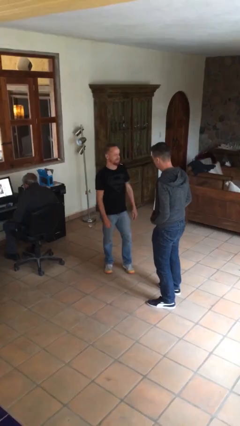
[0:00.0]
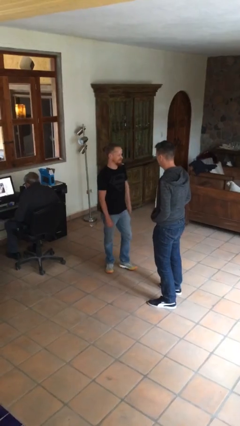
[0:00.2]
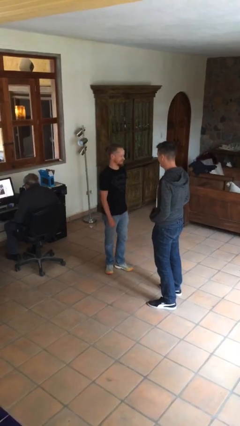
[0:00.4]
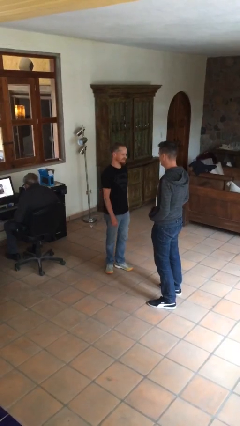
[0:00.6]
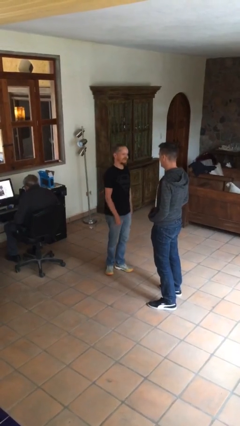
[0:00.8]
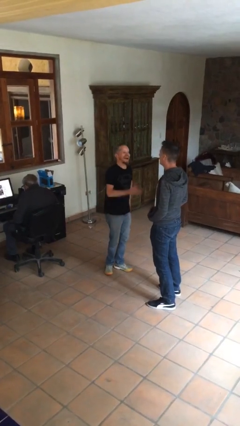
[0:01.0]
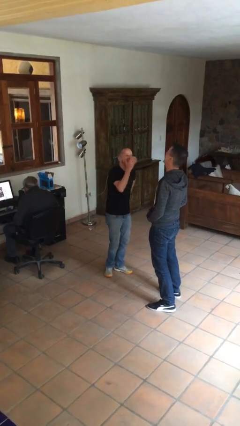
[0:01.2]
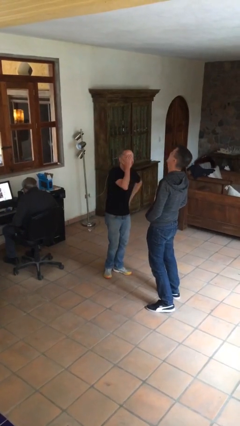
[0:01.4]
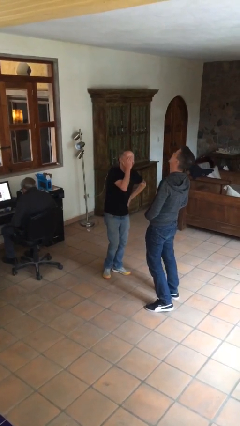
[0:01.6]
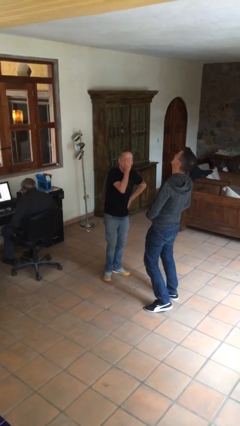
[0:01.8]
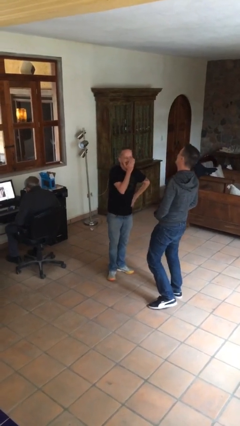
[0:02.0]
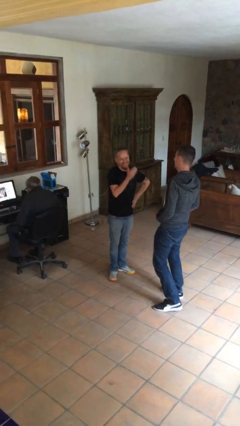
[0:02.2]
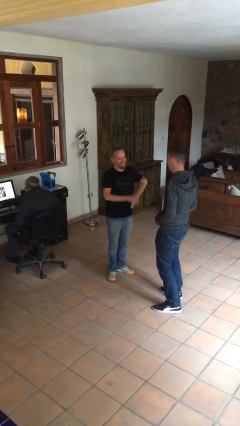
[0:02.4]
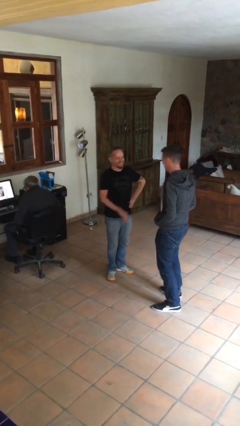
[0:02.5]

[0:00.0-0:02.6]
person laughs with person

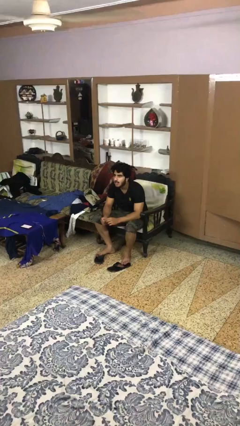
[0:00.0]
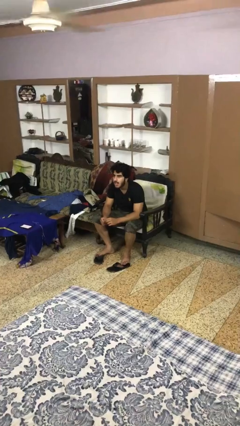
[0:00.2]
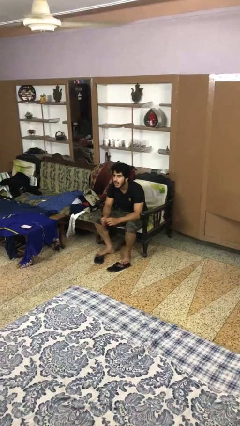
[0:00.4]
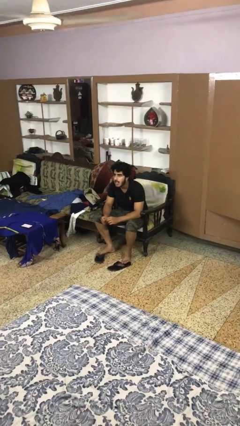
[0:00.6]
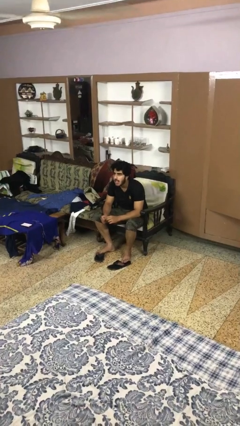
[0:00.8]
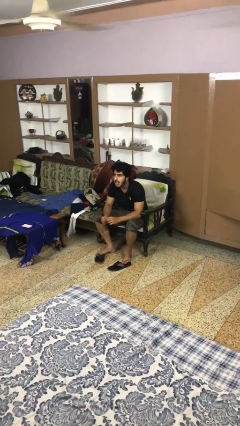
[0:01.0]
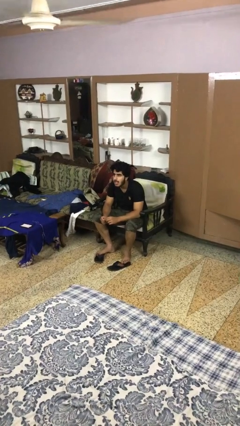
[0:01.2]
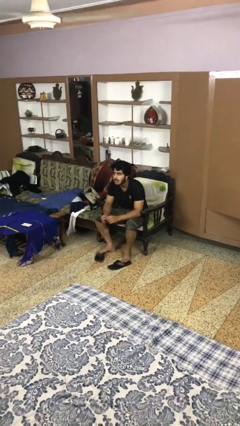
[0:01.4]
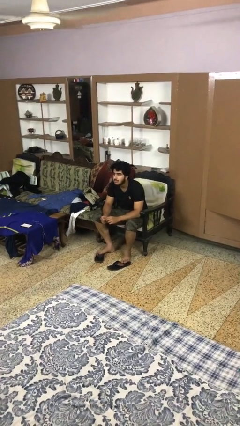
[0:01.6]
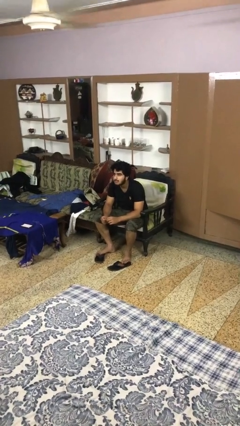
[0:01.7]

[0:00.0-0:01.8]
person sticks out tongue

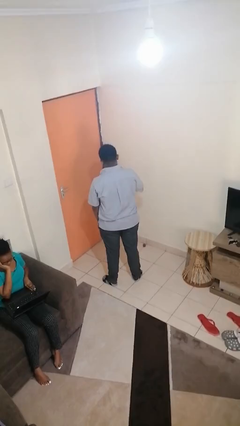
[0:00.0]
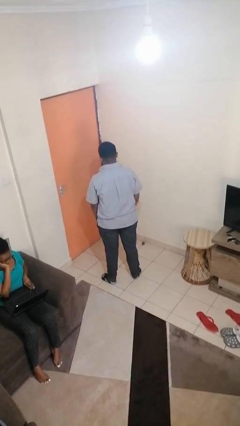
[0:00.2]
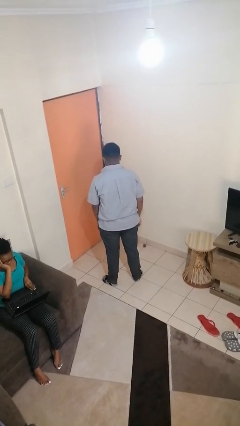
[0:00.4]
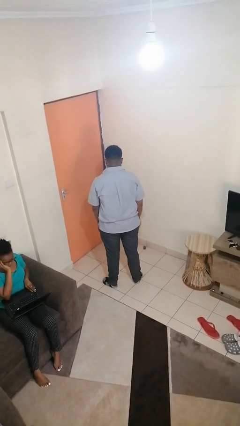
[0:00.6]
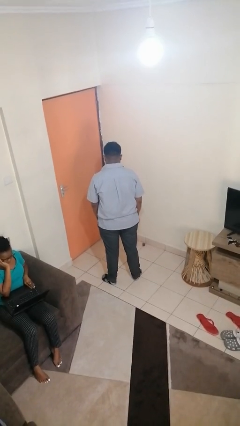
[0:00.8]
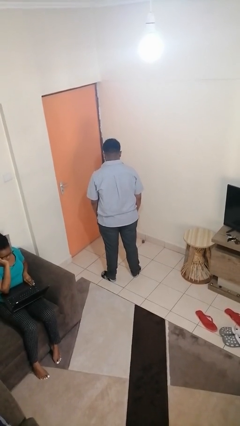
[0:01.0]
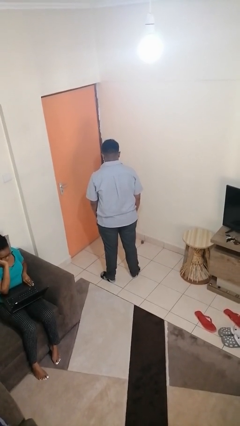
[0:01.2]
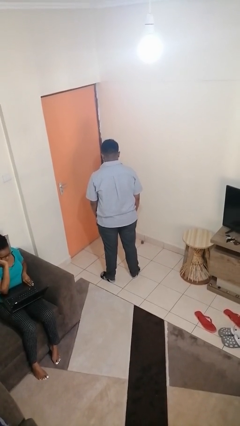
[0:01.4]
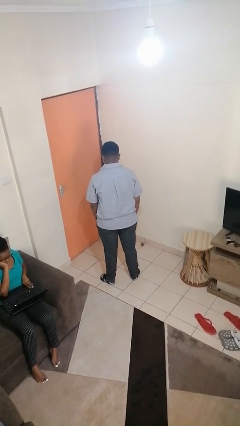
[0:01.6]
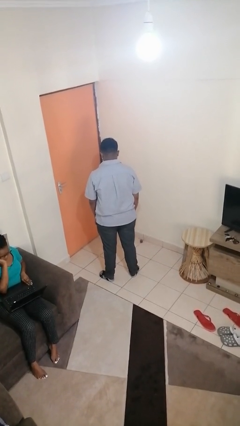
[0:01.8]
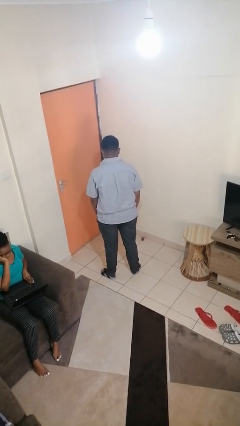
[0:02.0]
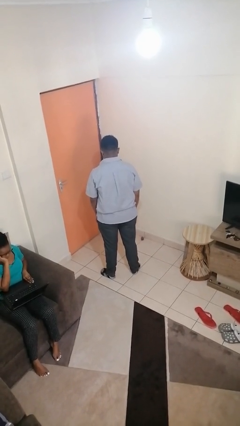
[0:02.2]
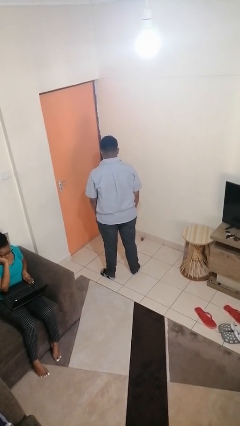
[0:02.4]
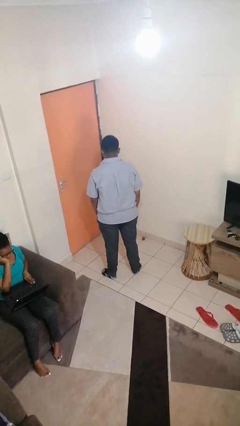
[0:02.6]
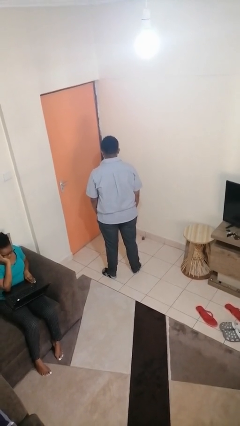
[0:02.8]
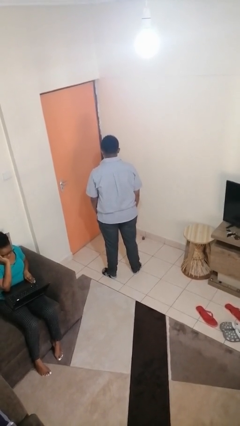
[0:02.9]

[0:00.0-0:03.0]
person exercises with jumping jacks

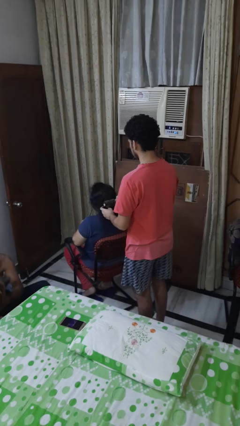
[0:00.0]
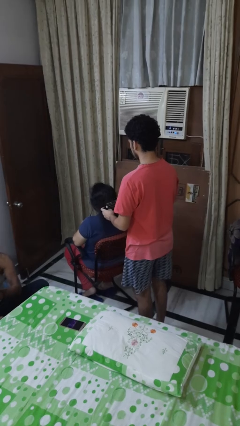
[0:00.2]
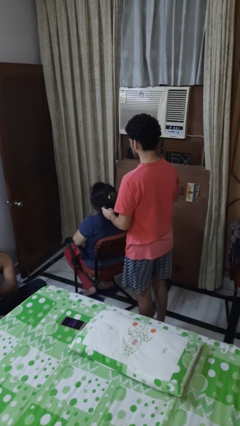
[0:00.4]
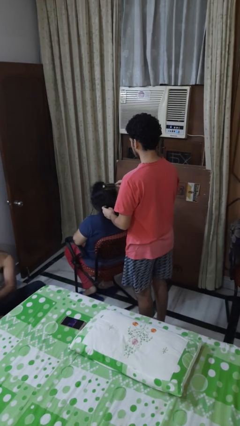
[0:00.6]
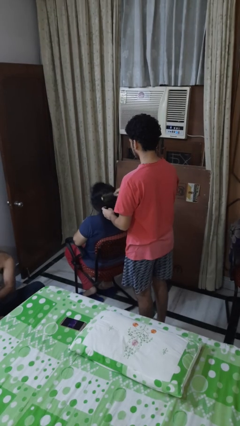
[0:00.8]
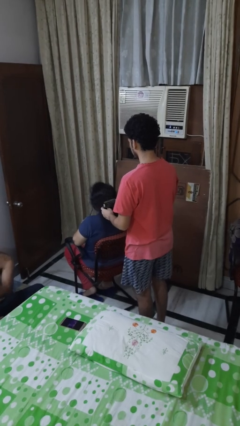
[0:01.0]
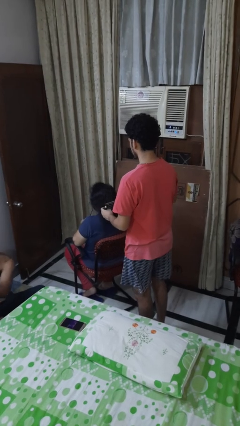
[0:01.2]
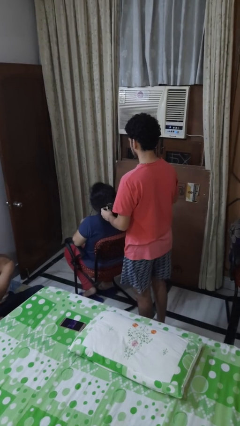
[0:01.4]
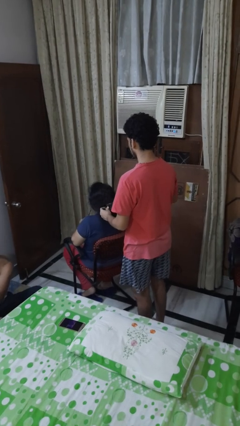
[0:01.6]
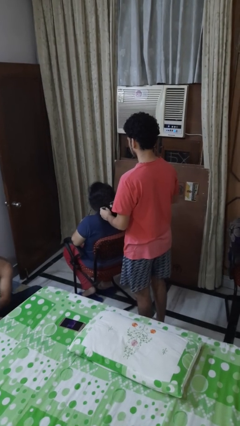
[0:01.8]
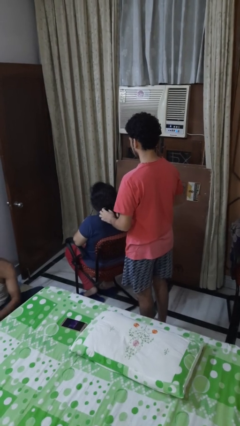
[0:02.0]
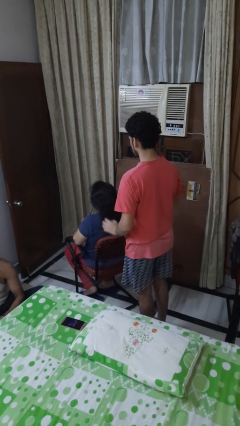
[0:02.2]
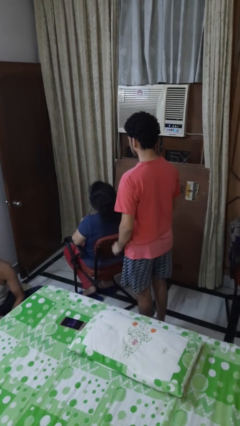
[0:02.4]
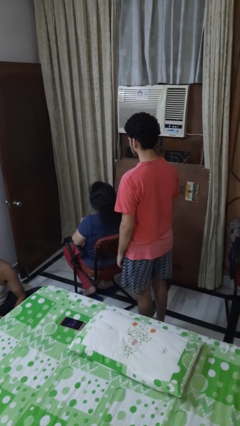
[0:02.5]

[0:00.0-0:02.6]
person brushes hair of person

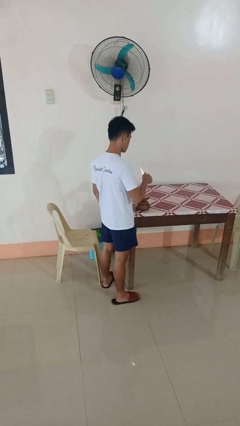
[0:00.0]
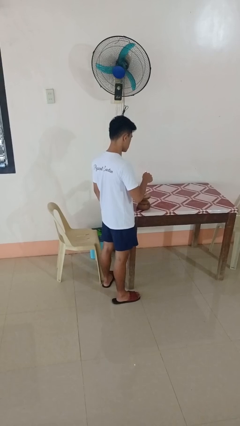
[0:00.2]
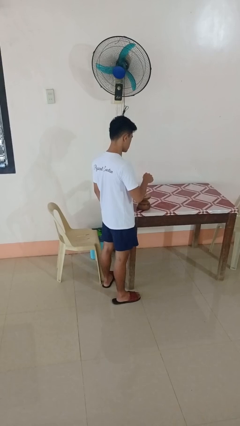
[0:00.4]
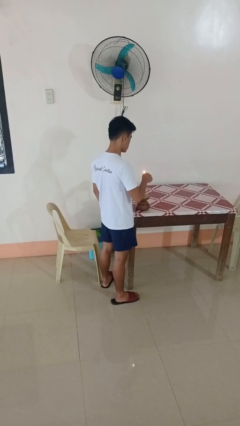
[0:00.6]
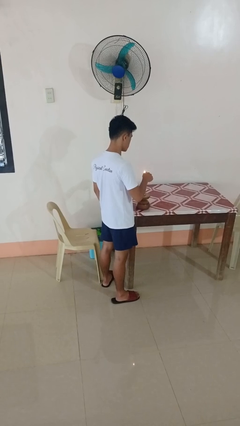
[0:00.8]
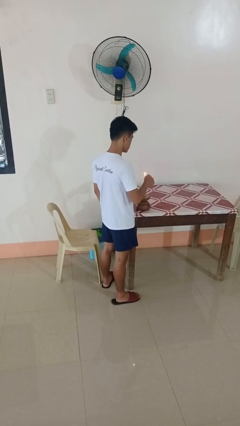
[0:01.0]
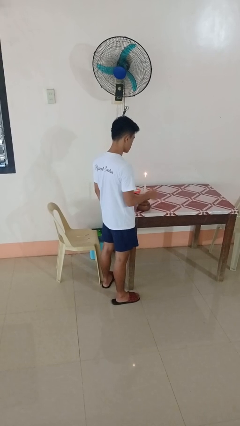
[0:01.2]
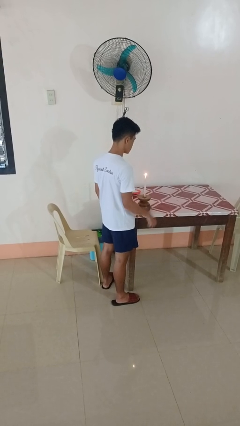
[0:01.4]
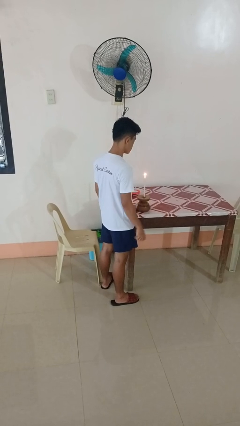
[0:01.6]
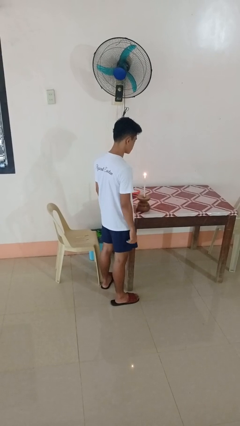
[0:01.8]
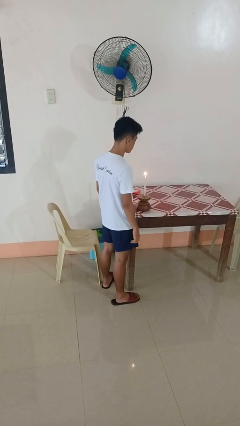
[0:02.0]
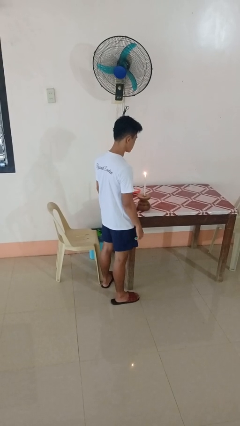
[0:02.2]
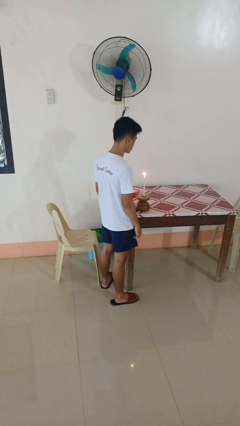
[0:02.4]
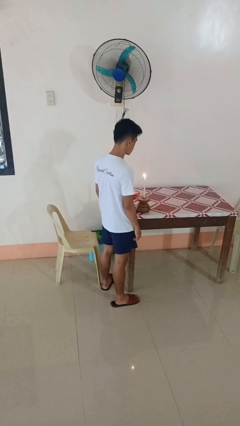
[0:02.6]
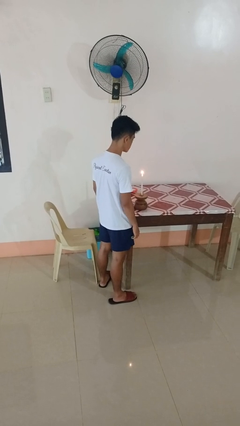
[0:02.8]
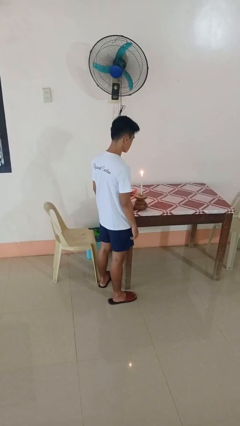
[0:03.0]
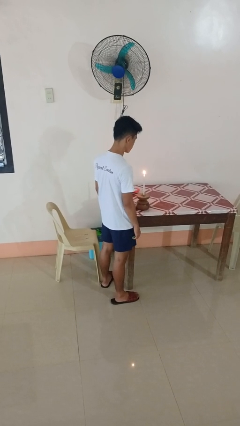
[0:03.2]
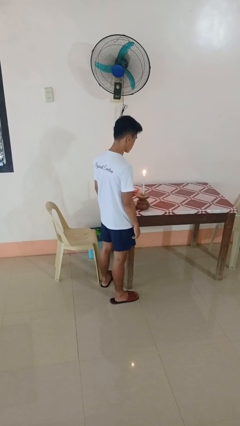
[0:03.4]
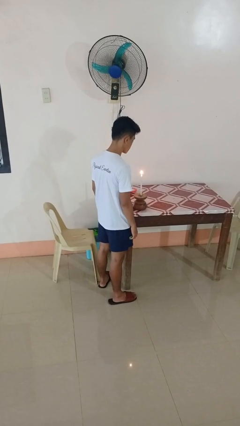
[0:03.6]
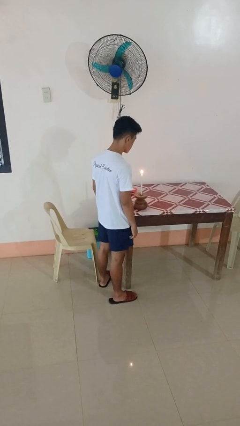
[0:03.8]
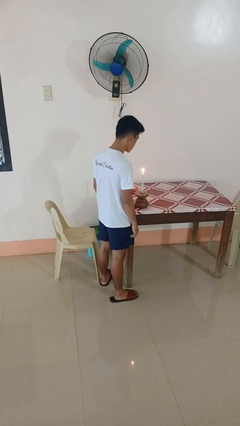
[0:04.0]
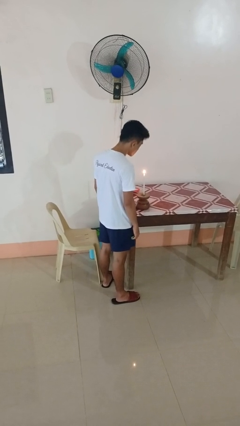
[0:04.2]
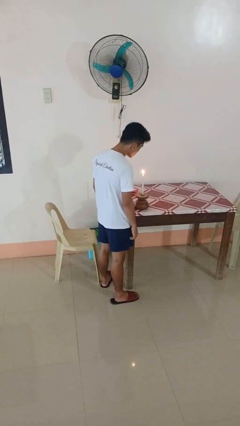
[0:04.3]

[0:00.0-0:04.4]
person lights candle

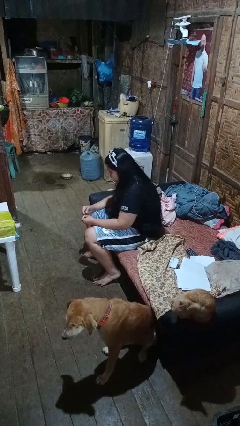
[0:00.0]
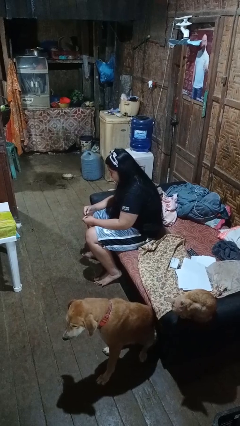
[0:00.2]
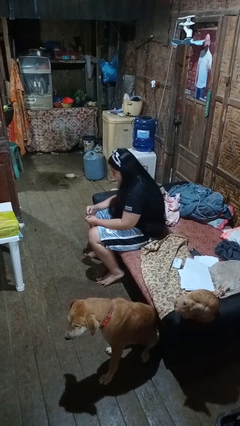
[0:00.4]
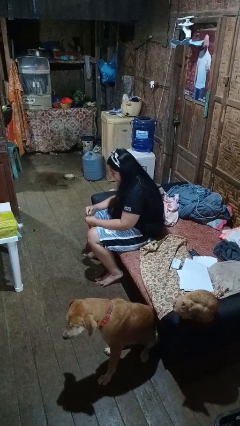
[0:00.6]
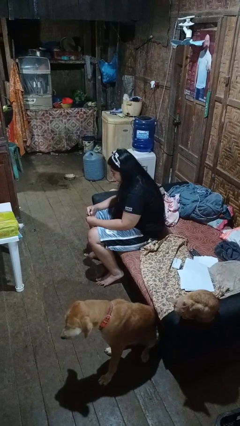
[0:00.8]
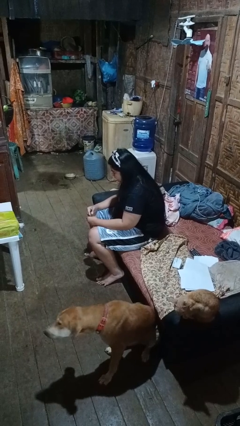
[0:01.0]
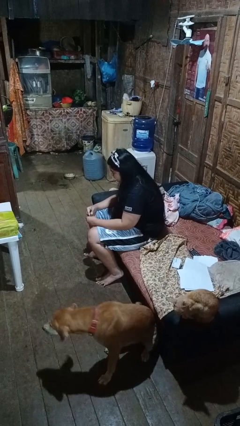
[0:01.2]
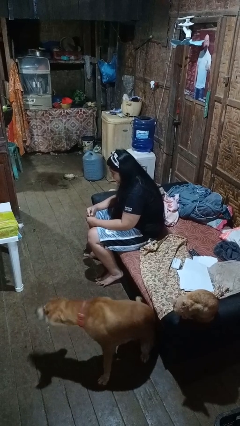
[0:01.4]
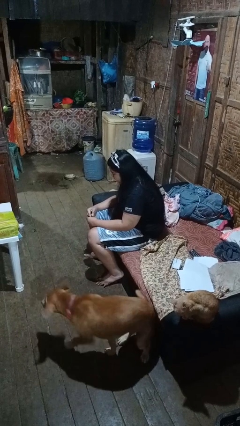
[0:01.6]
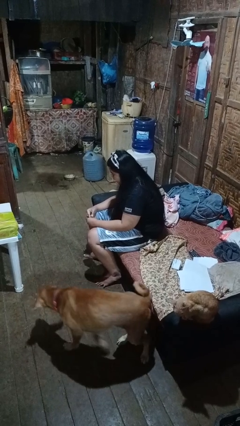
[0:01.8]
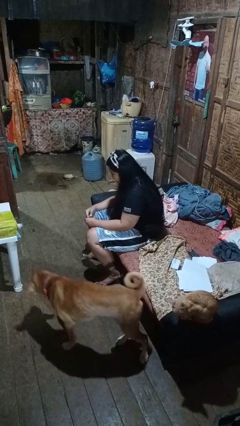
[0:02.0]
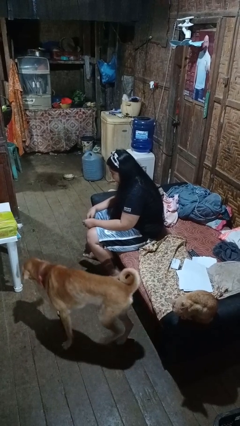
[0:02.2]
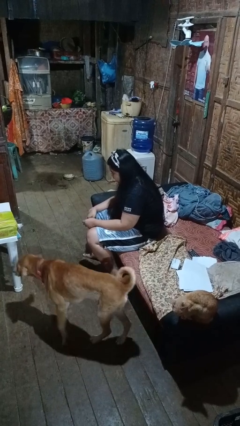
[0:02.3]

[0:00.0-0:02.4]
person clips fingernails

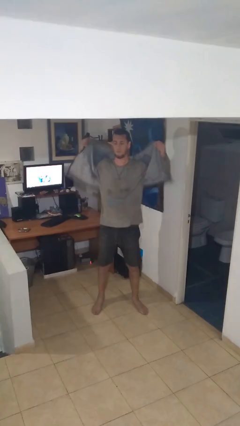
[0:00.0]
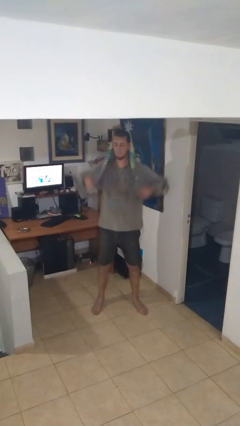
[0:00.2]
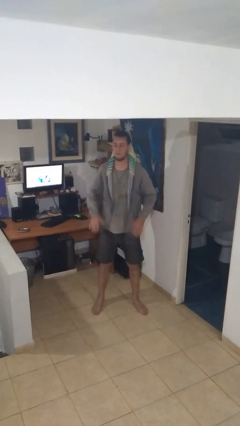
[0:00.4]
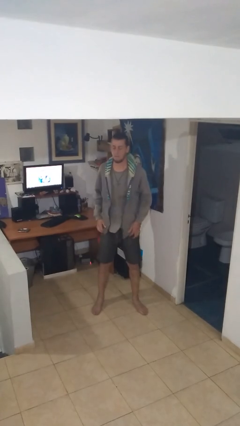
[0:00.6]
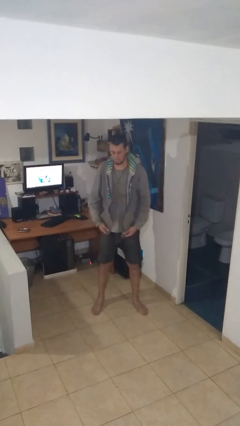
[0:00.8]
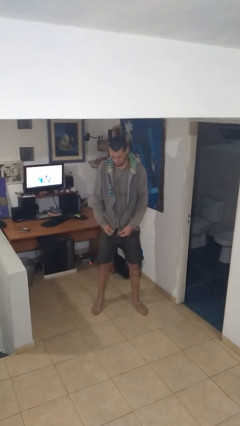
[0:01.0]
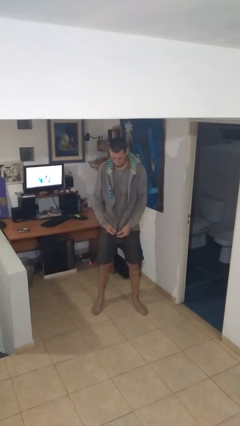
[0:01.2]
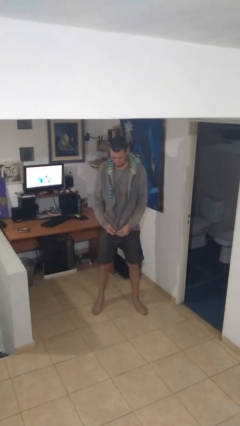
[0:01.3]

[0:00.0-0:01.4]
person puts on jacket
